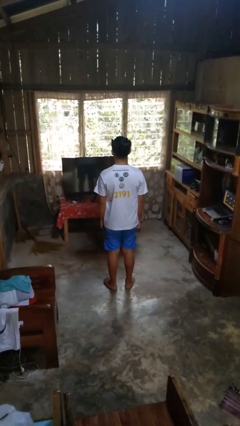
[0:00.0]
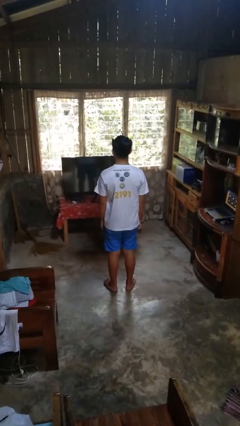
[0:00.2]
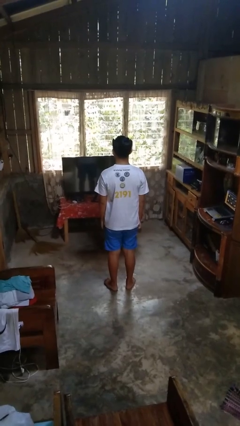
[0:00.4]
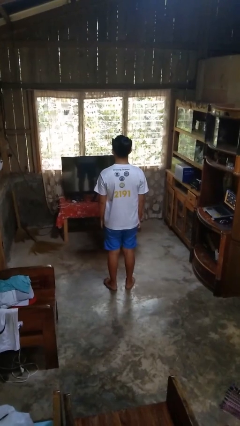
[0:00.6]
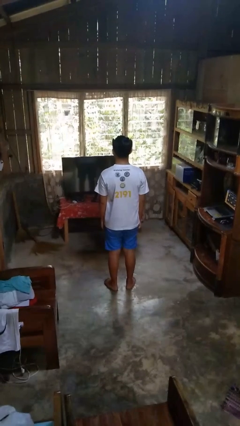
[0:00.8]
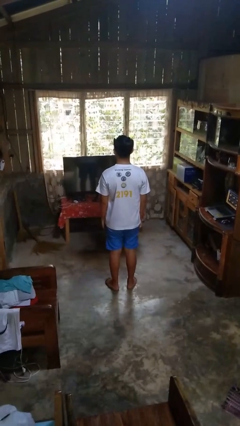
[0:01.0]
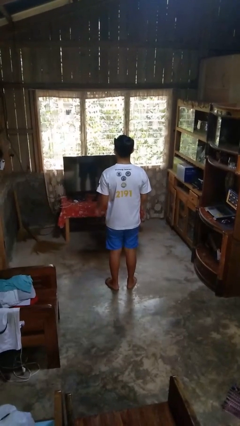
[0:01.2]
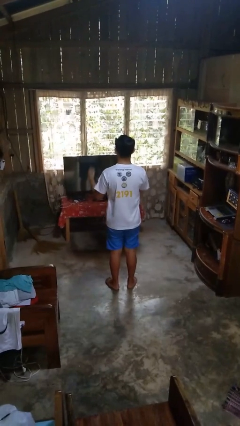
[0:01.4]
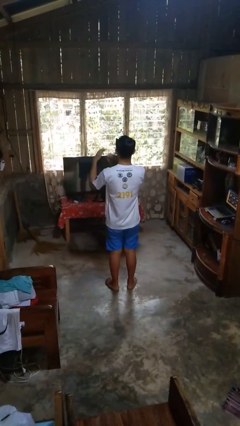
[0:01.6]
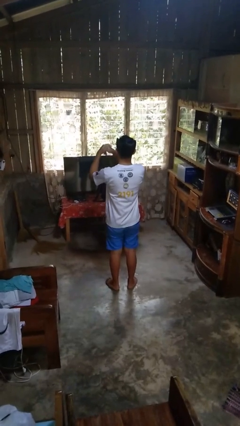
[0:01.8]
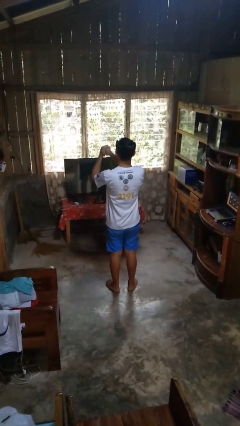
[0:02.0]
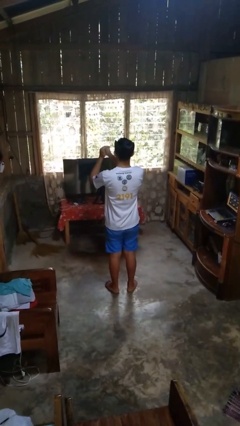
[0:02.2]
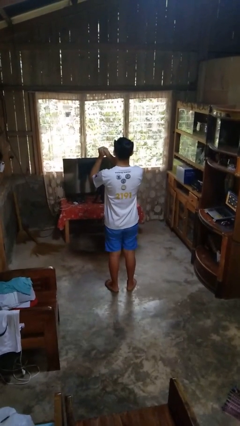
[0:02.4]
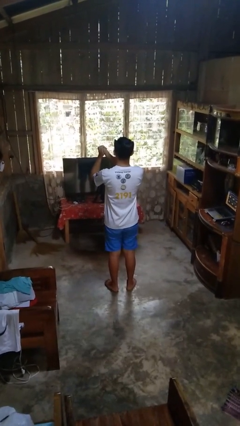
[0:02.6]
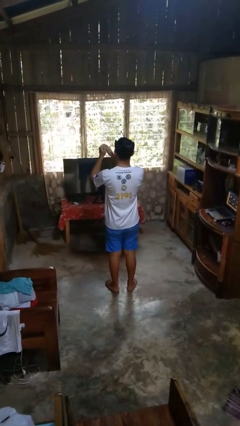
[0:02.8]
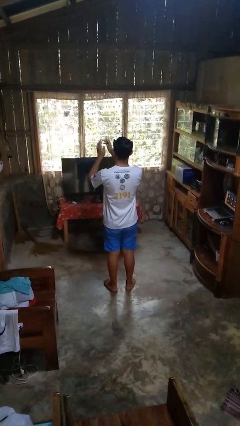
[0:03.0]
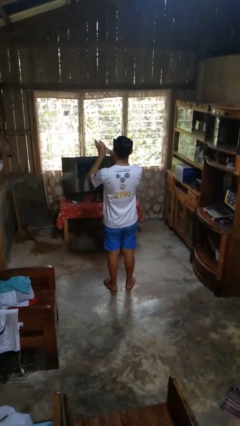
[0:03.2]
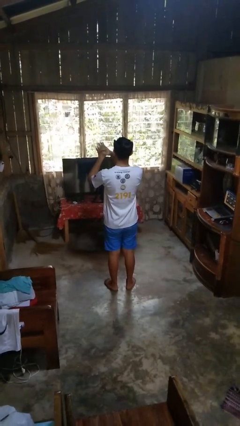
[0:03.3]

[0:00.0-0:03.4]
person cracks knuckles

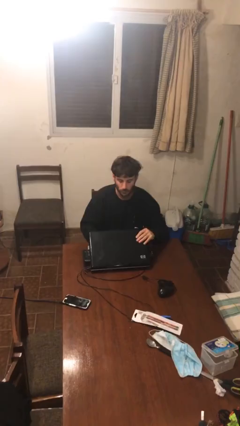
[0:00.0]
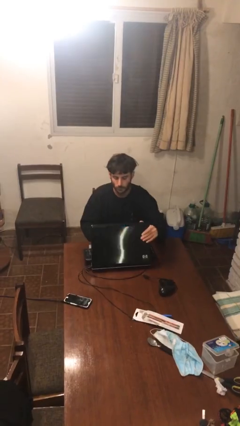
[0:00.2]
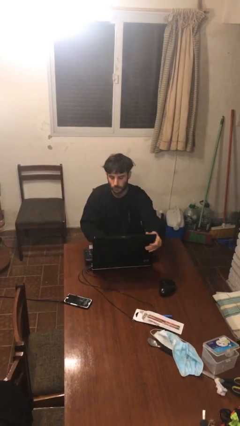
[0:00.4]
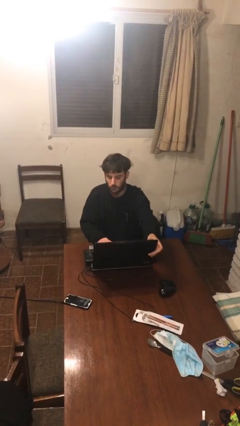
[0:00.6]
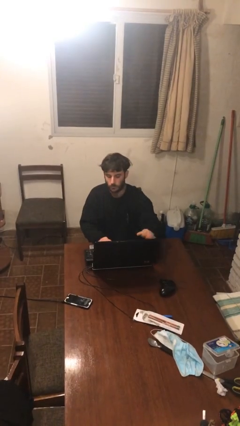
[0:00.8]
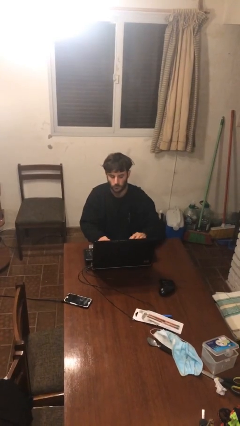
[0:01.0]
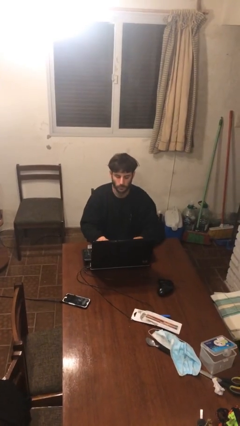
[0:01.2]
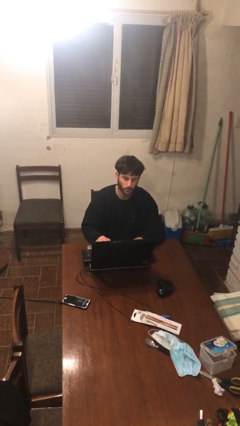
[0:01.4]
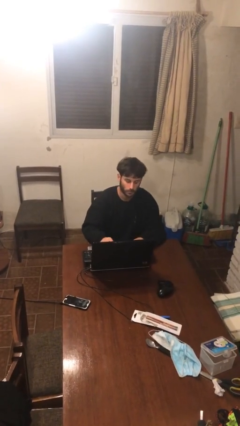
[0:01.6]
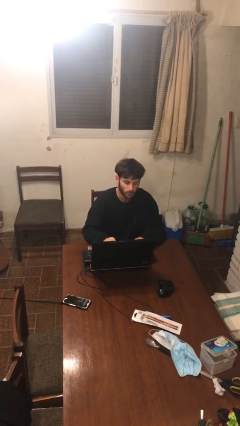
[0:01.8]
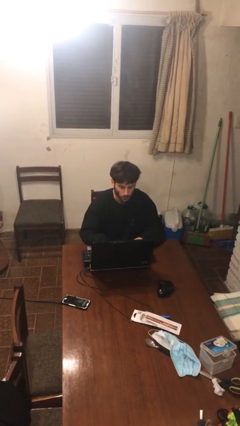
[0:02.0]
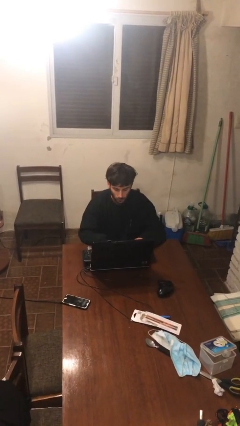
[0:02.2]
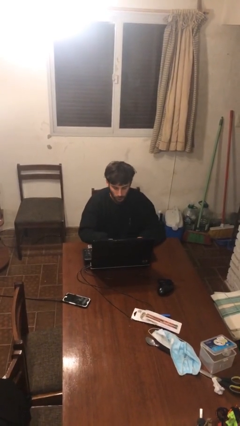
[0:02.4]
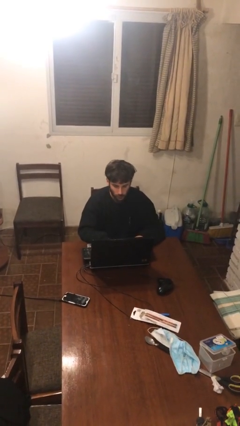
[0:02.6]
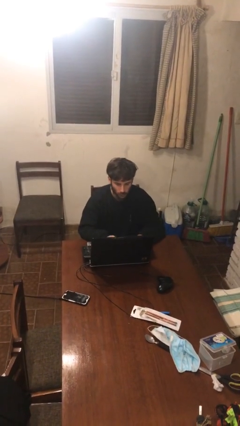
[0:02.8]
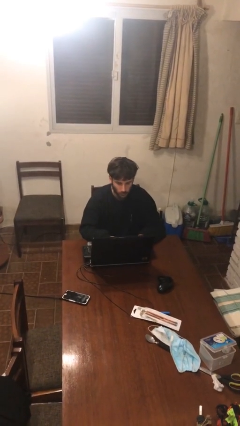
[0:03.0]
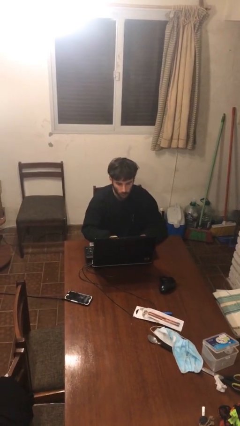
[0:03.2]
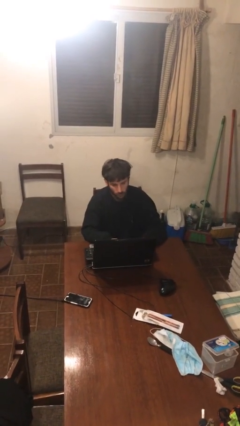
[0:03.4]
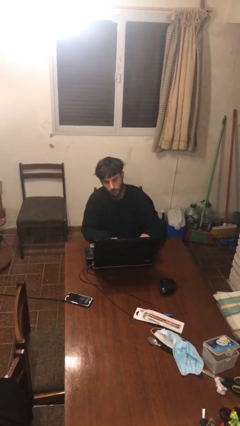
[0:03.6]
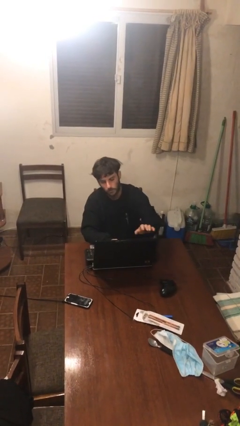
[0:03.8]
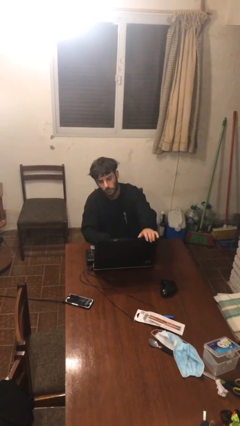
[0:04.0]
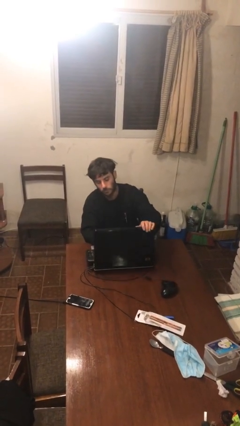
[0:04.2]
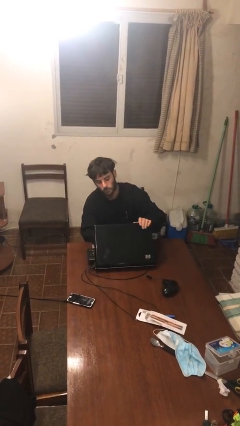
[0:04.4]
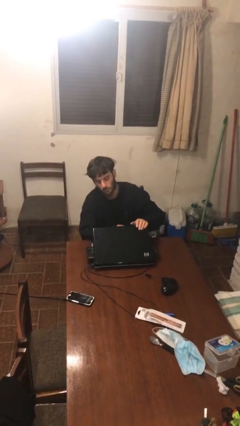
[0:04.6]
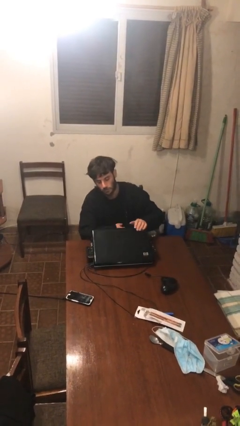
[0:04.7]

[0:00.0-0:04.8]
person interacts with laptop

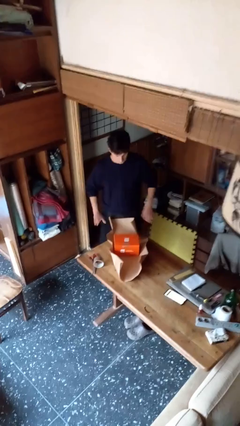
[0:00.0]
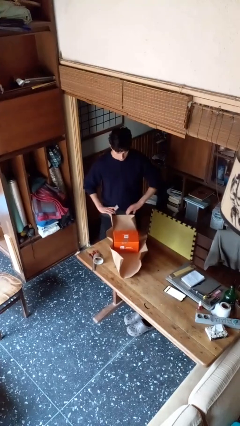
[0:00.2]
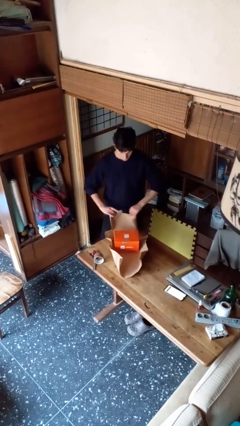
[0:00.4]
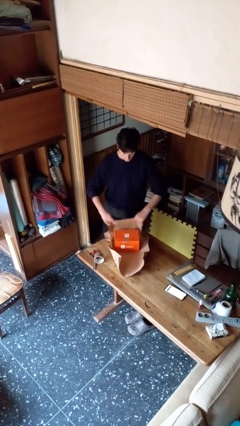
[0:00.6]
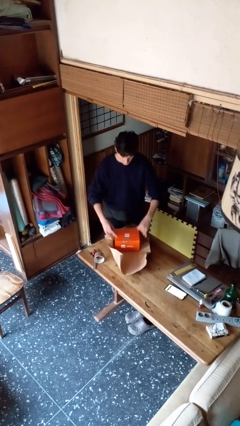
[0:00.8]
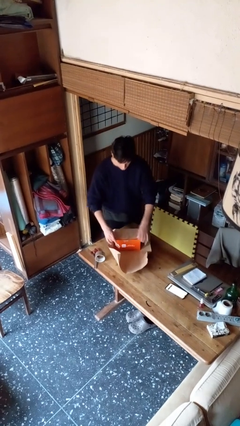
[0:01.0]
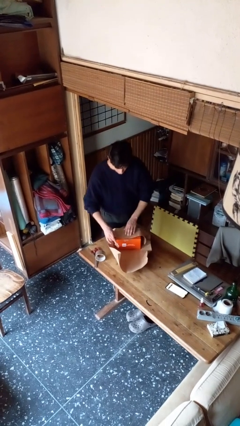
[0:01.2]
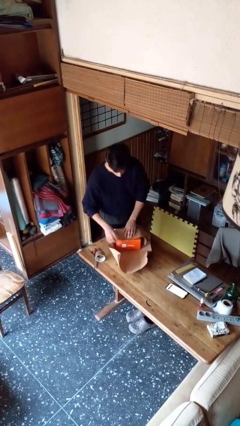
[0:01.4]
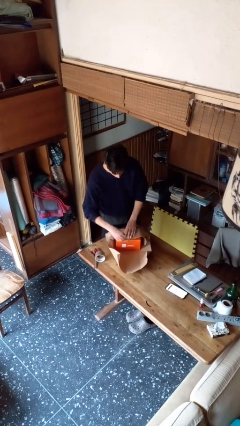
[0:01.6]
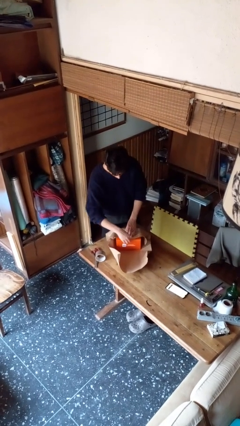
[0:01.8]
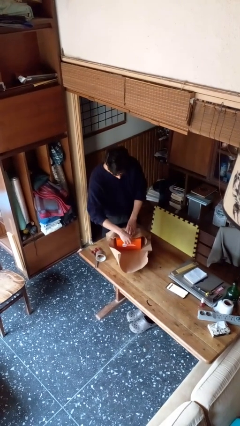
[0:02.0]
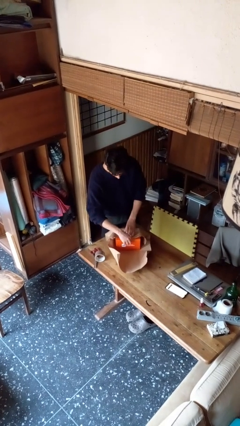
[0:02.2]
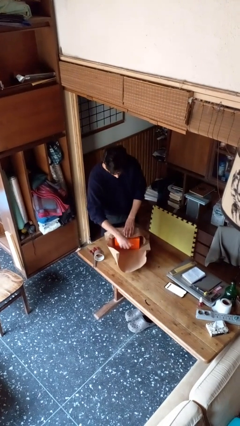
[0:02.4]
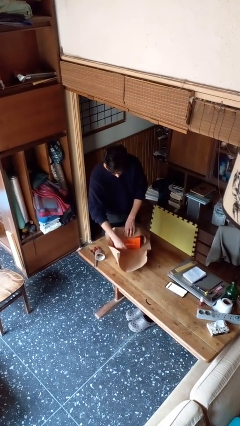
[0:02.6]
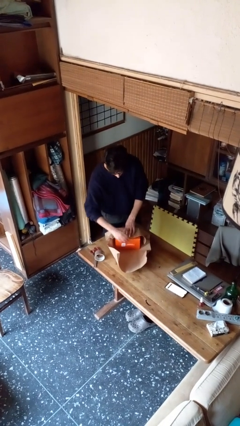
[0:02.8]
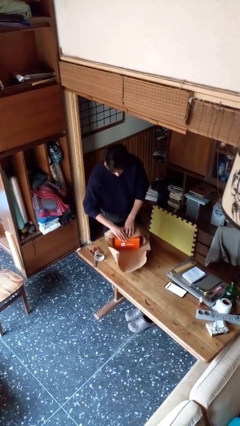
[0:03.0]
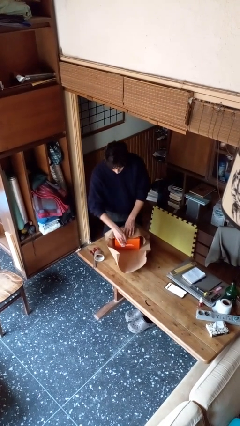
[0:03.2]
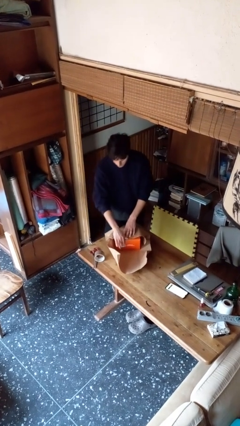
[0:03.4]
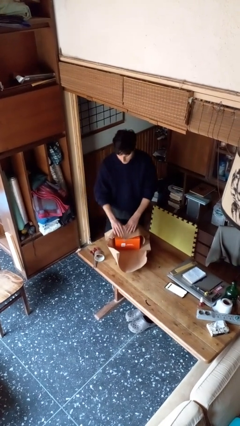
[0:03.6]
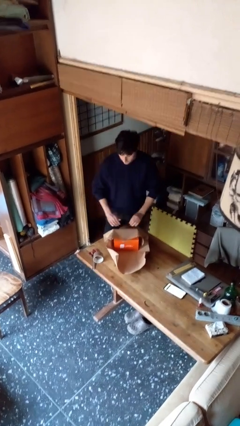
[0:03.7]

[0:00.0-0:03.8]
person wraps box

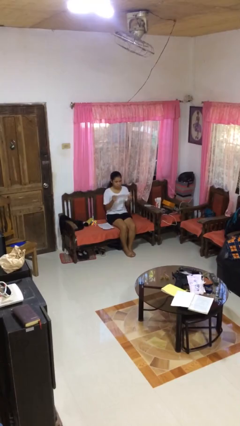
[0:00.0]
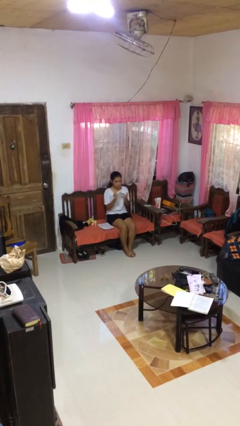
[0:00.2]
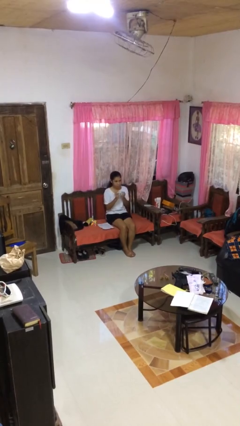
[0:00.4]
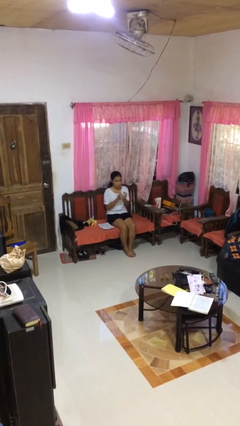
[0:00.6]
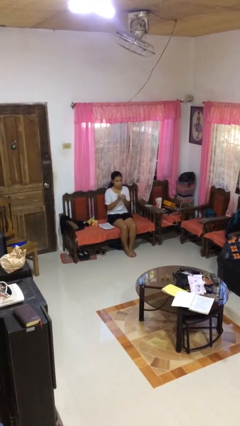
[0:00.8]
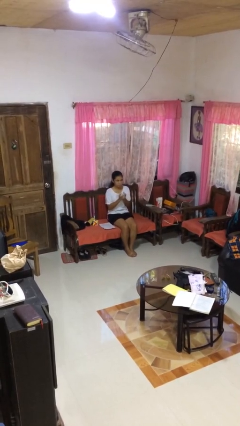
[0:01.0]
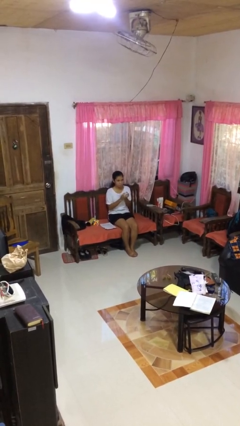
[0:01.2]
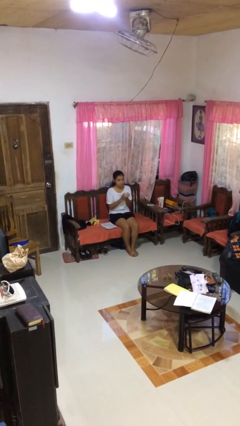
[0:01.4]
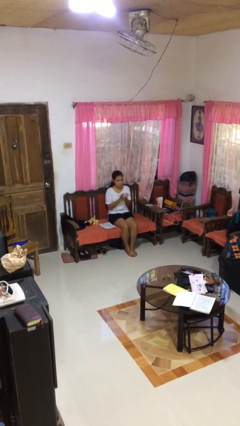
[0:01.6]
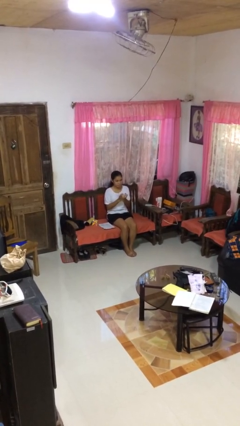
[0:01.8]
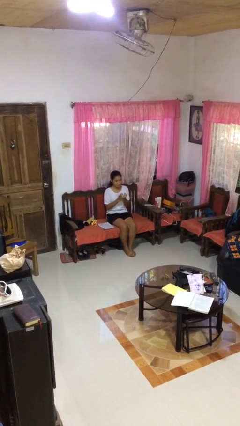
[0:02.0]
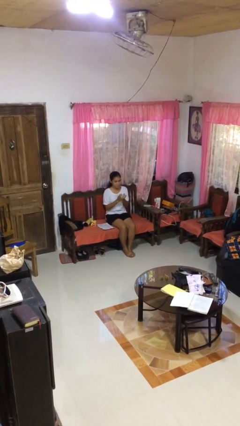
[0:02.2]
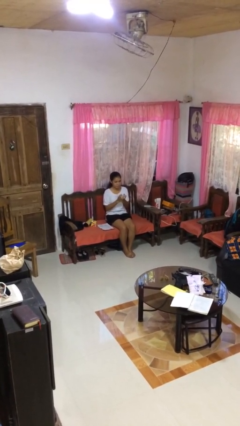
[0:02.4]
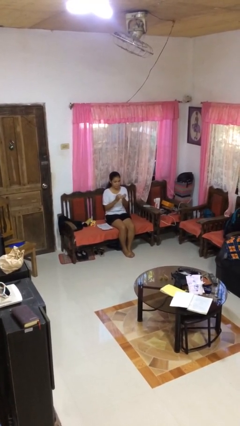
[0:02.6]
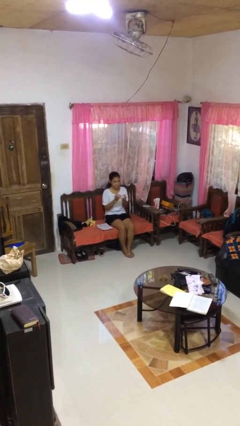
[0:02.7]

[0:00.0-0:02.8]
person crumples paper

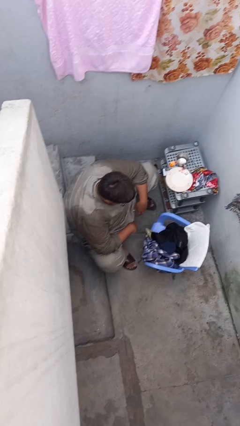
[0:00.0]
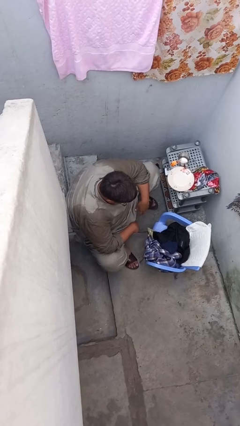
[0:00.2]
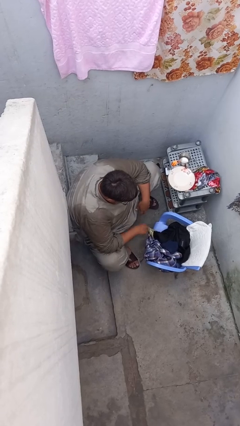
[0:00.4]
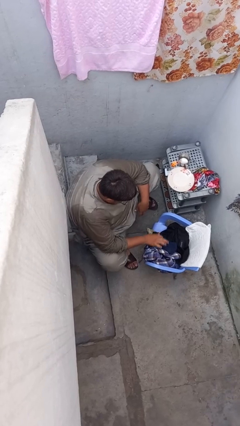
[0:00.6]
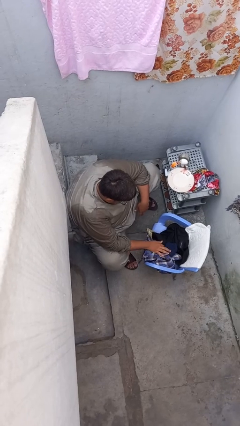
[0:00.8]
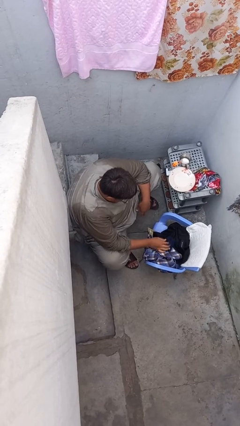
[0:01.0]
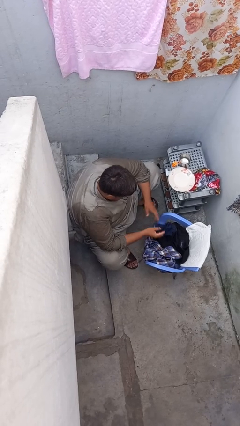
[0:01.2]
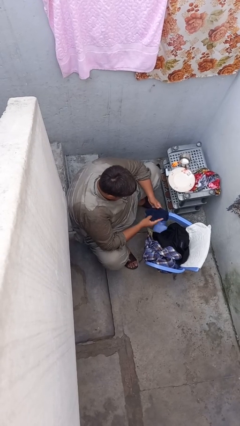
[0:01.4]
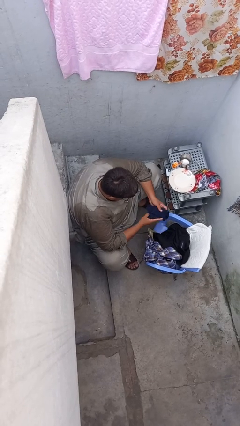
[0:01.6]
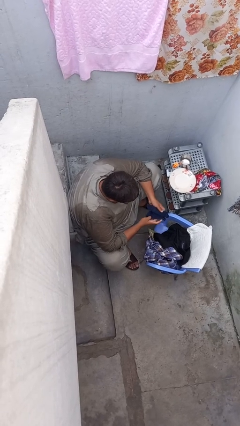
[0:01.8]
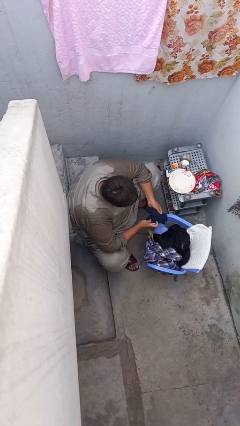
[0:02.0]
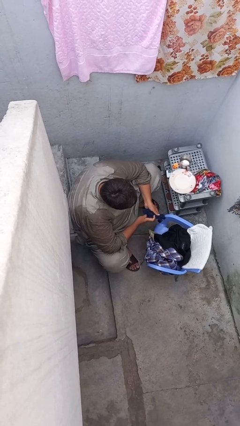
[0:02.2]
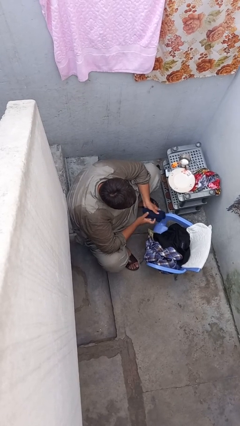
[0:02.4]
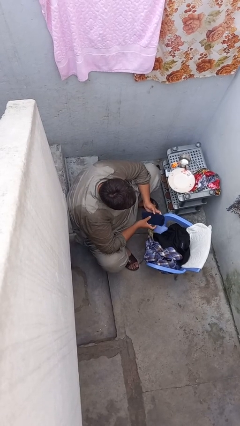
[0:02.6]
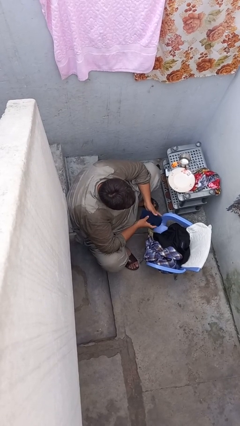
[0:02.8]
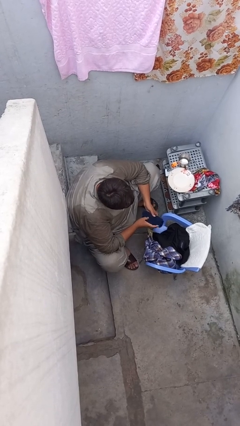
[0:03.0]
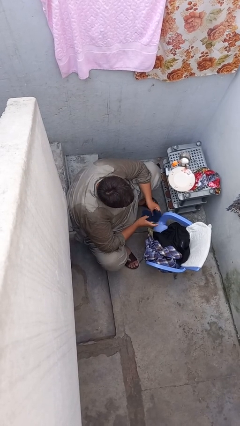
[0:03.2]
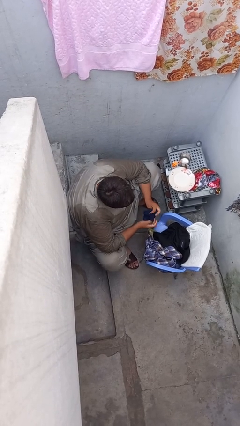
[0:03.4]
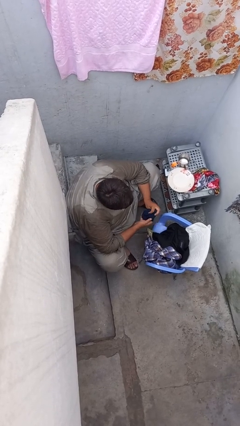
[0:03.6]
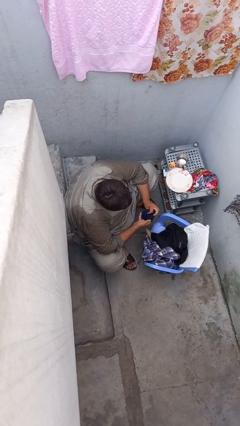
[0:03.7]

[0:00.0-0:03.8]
person folds socks
